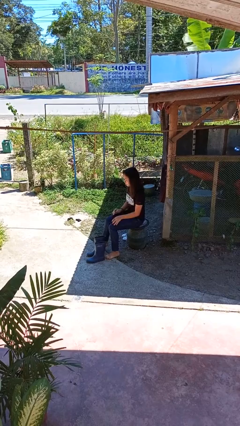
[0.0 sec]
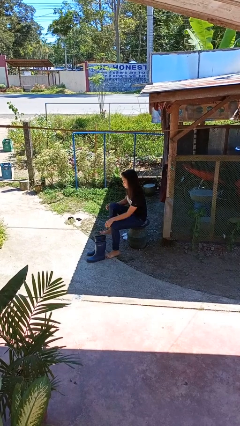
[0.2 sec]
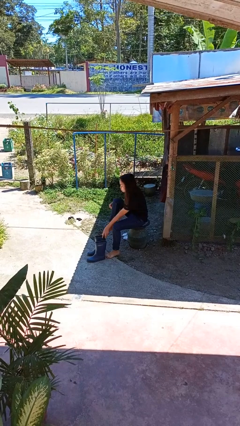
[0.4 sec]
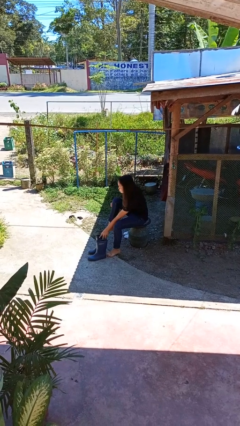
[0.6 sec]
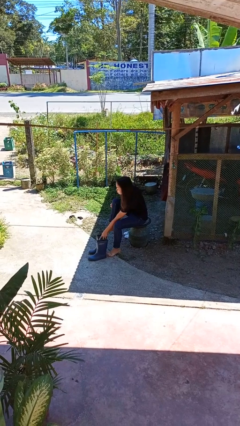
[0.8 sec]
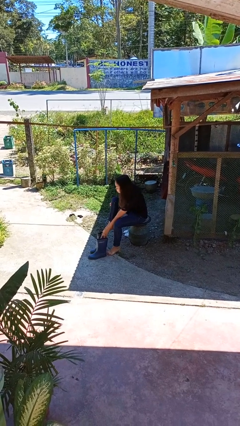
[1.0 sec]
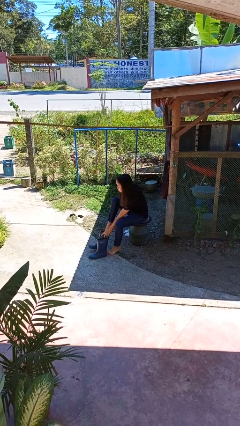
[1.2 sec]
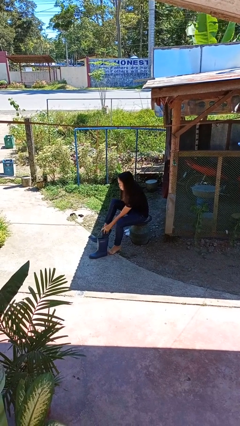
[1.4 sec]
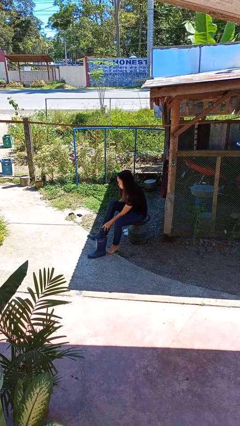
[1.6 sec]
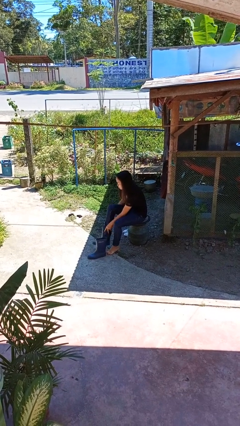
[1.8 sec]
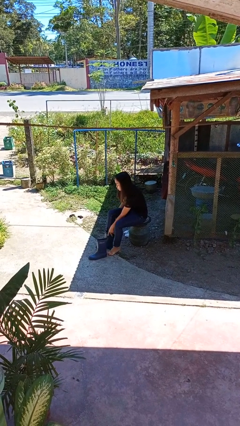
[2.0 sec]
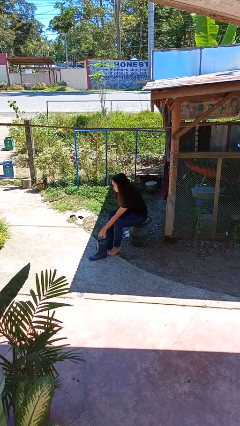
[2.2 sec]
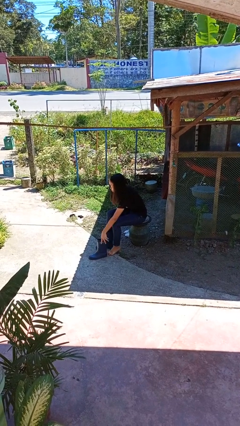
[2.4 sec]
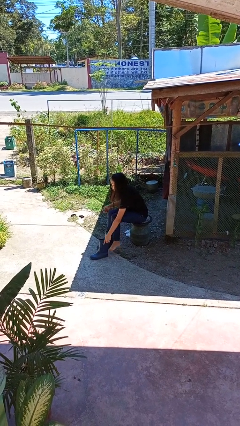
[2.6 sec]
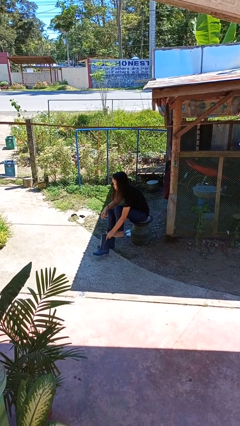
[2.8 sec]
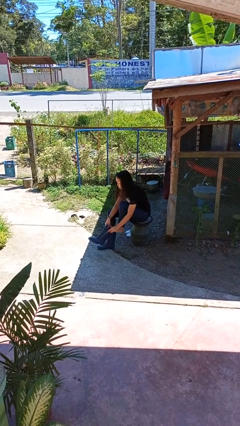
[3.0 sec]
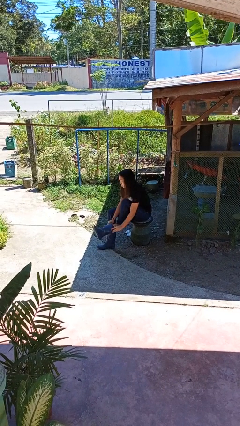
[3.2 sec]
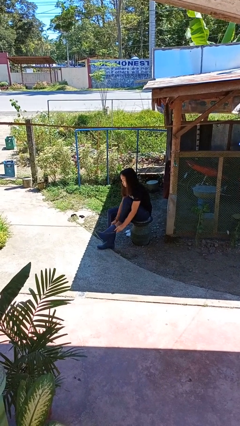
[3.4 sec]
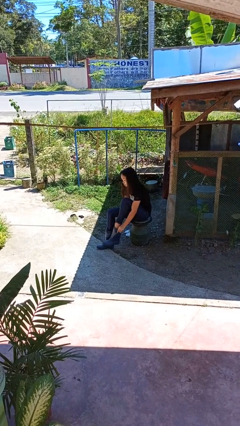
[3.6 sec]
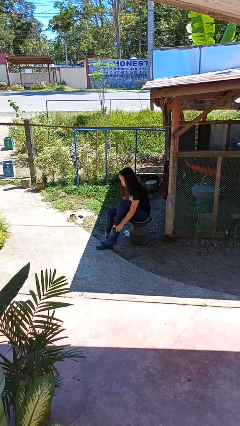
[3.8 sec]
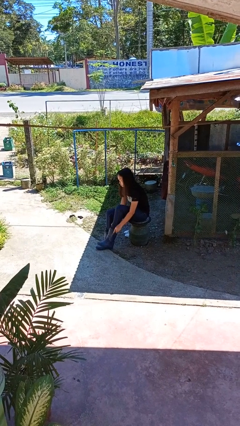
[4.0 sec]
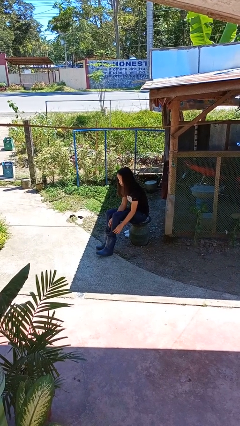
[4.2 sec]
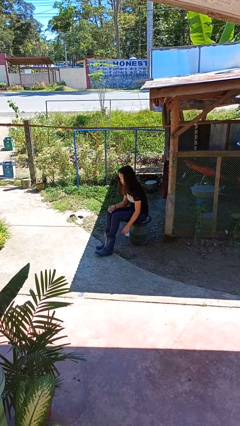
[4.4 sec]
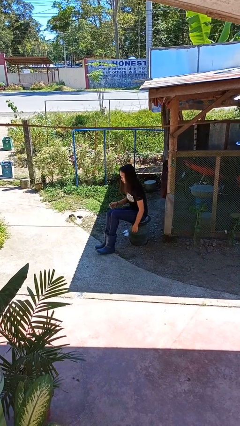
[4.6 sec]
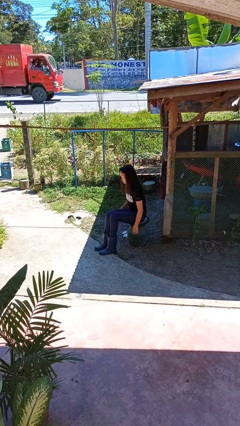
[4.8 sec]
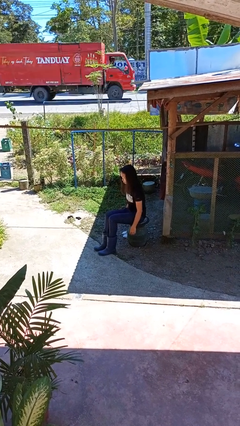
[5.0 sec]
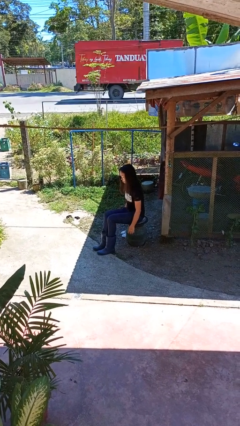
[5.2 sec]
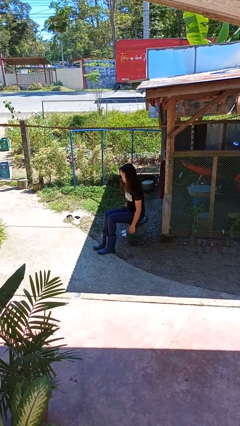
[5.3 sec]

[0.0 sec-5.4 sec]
person puts on boots

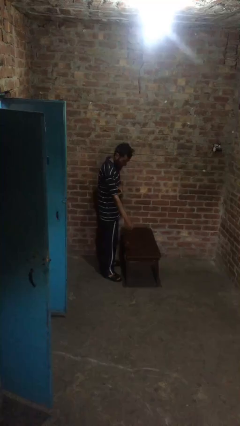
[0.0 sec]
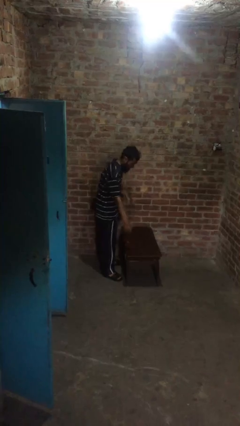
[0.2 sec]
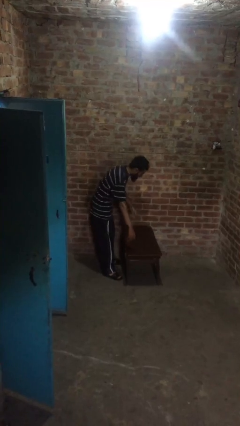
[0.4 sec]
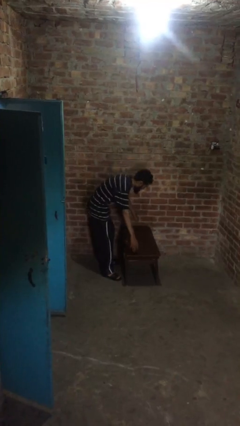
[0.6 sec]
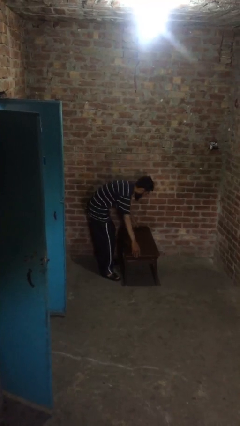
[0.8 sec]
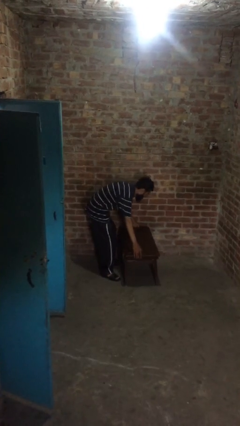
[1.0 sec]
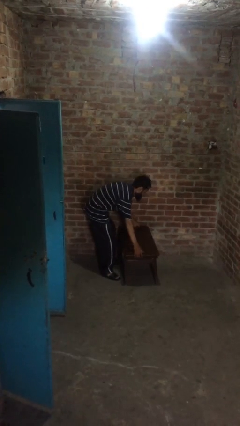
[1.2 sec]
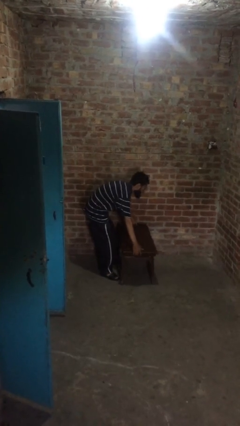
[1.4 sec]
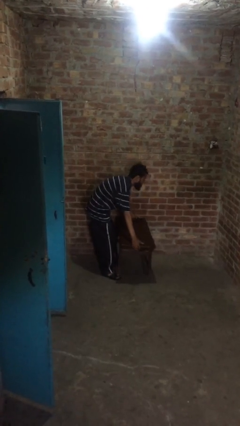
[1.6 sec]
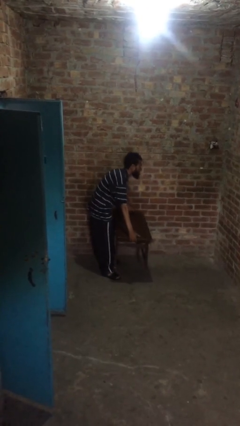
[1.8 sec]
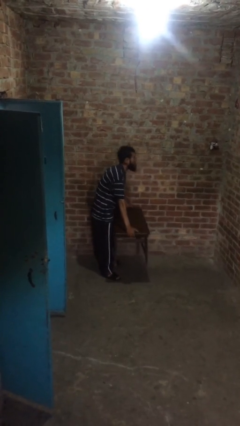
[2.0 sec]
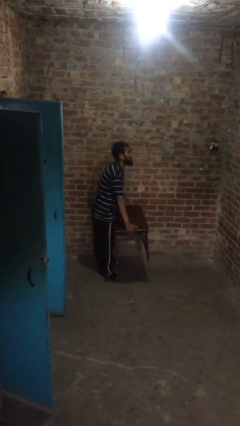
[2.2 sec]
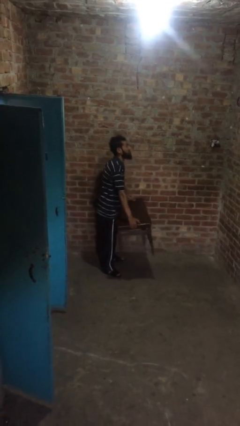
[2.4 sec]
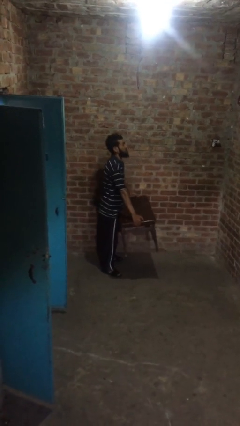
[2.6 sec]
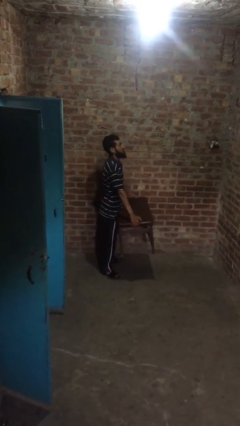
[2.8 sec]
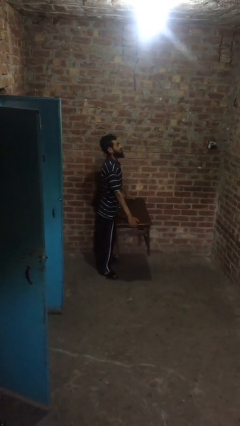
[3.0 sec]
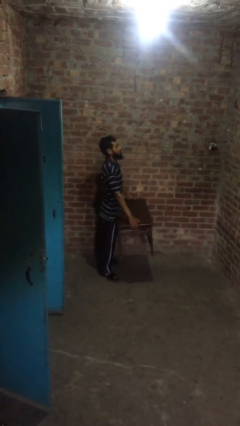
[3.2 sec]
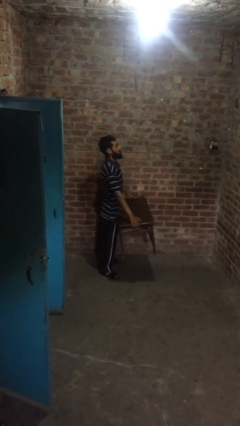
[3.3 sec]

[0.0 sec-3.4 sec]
person picks up object from floor

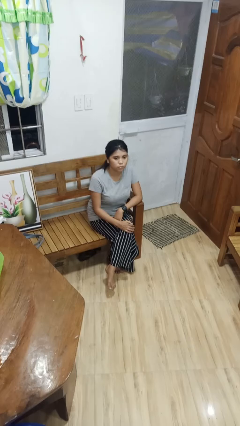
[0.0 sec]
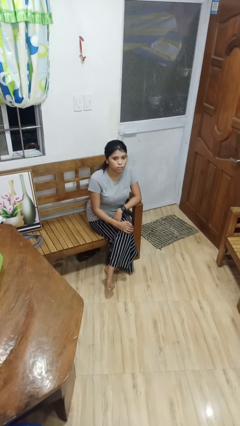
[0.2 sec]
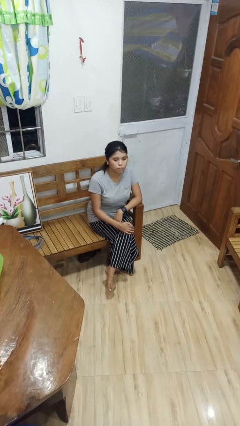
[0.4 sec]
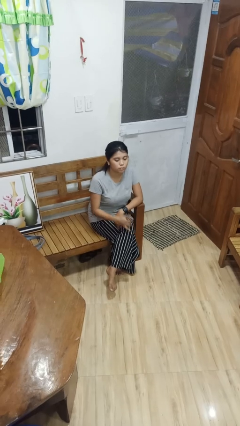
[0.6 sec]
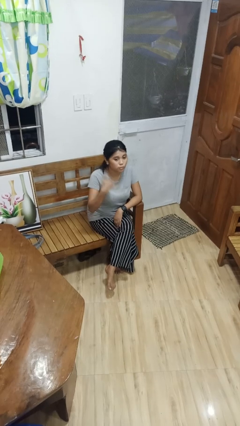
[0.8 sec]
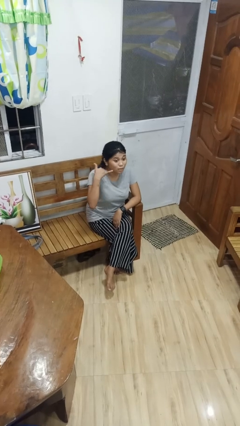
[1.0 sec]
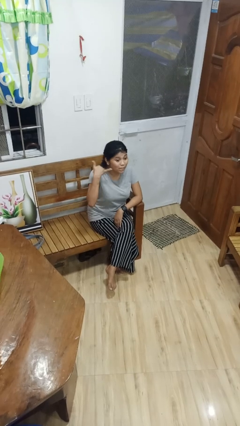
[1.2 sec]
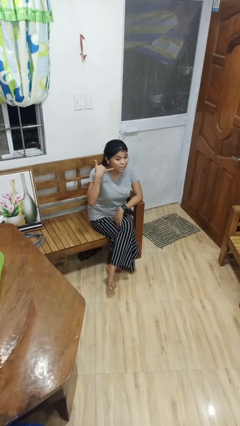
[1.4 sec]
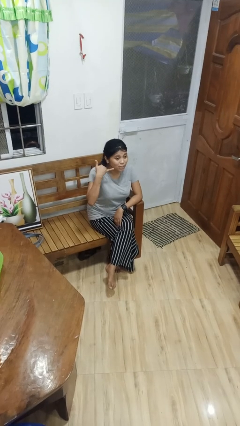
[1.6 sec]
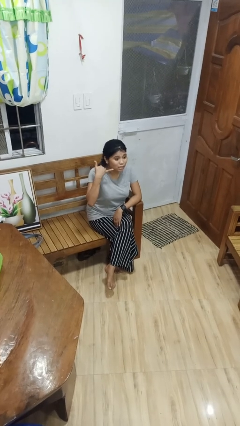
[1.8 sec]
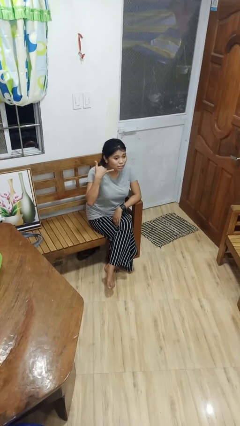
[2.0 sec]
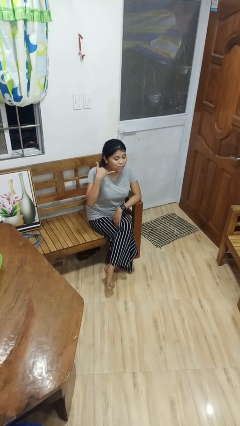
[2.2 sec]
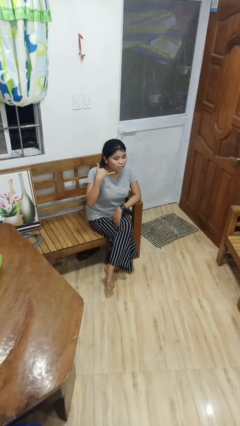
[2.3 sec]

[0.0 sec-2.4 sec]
person gestures call me

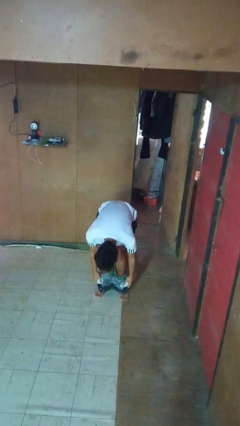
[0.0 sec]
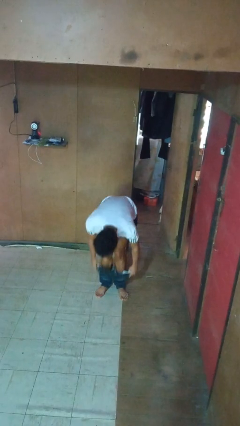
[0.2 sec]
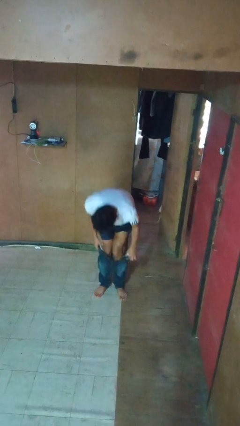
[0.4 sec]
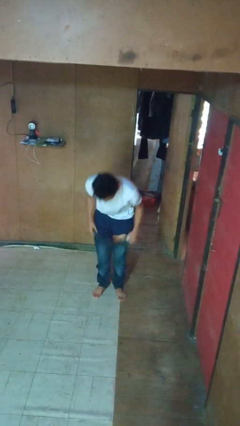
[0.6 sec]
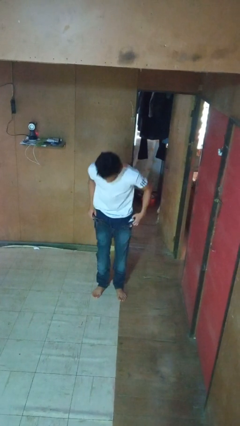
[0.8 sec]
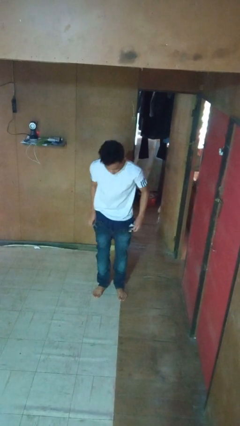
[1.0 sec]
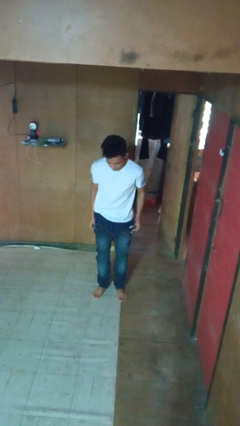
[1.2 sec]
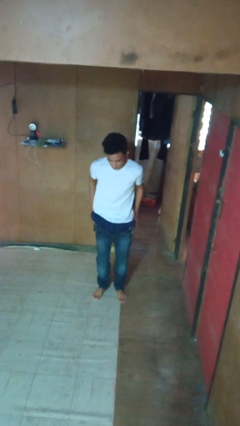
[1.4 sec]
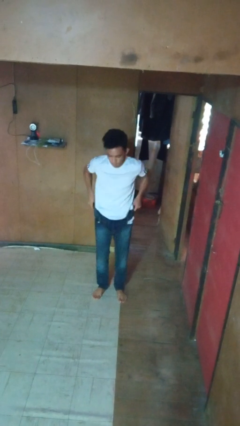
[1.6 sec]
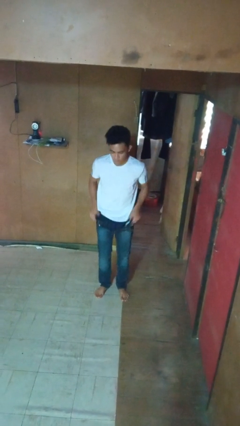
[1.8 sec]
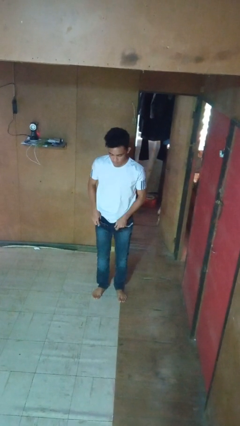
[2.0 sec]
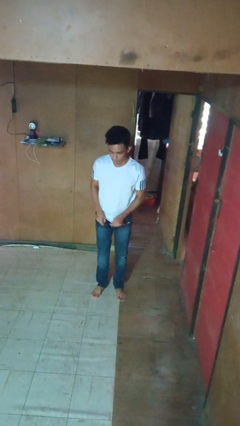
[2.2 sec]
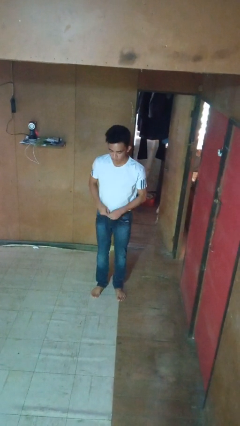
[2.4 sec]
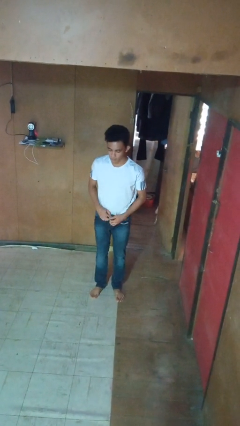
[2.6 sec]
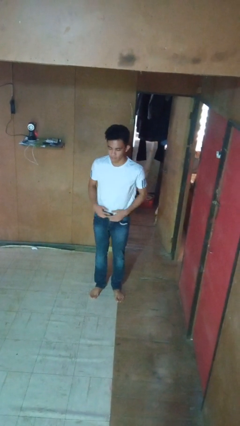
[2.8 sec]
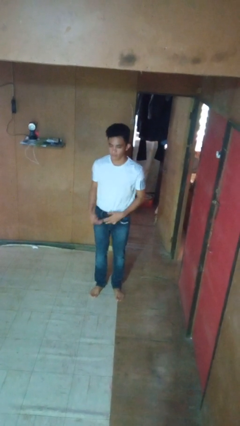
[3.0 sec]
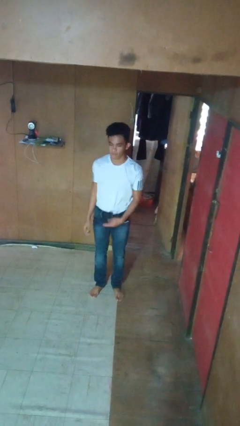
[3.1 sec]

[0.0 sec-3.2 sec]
person puts on pants

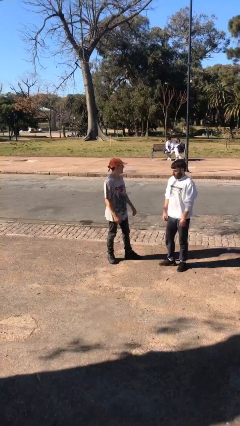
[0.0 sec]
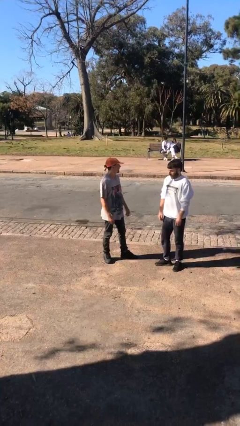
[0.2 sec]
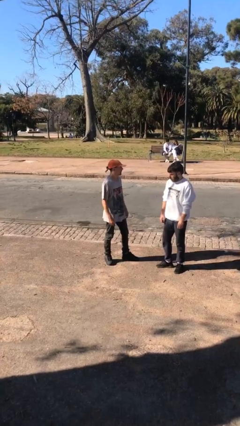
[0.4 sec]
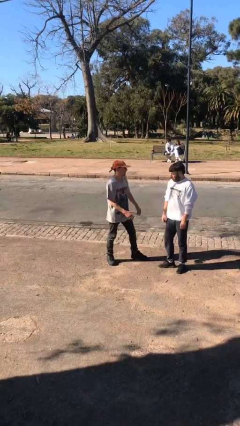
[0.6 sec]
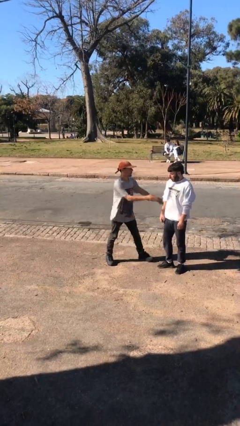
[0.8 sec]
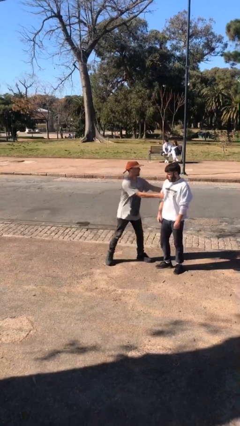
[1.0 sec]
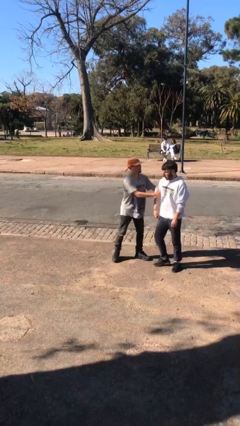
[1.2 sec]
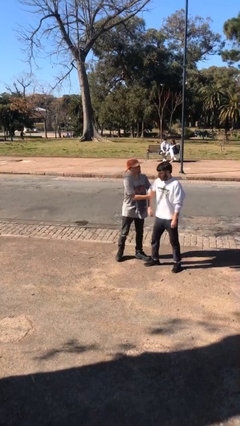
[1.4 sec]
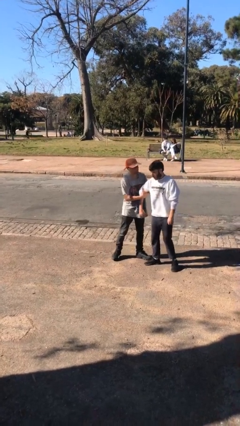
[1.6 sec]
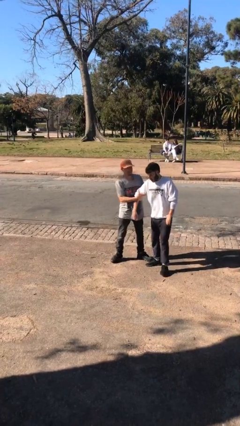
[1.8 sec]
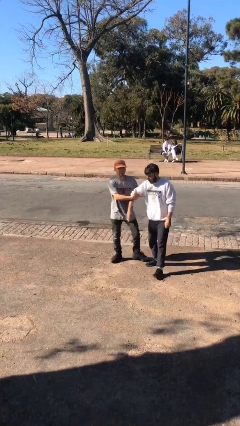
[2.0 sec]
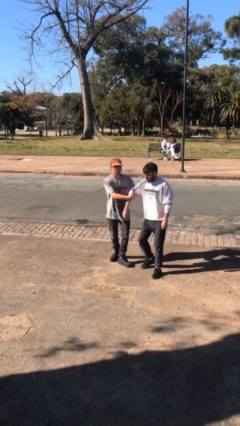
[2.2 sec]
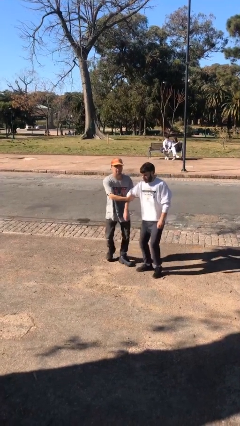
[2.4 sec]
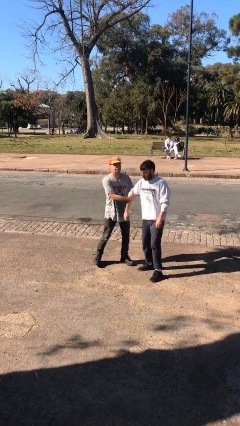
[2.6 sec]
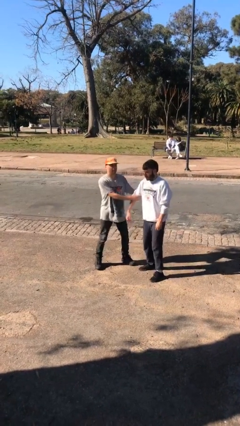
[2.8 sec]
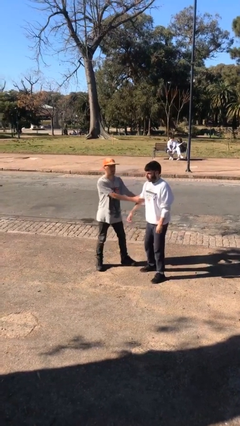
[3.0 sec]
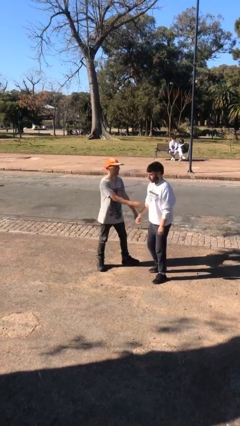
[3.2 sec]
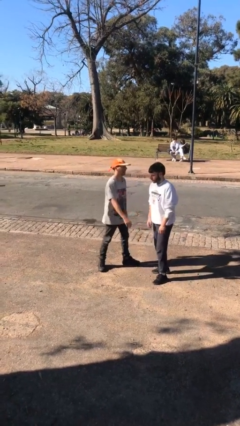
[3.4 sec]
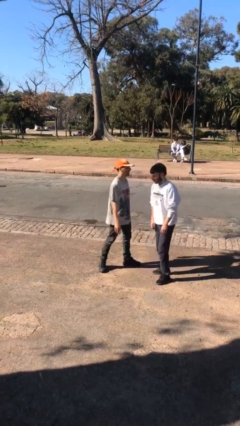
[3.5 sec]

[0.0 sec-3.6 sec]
person grabs person by bicep
